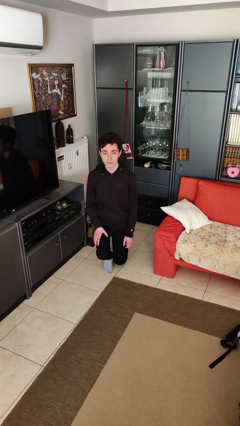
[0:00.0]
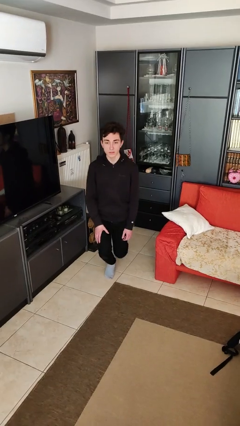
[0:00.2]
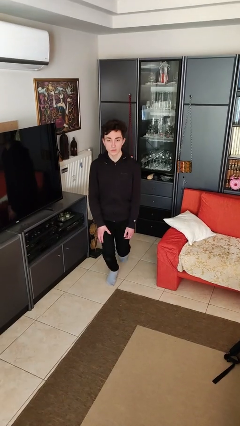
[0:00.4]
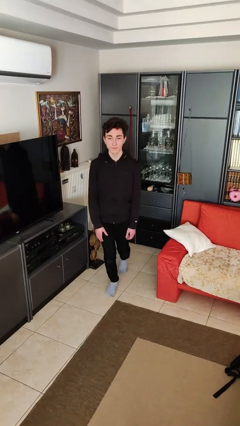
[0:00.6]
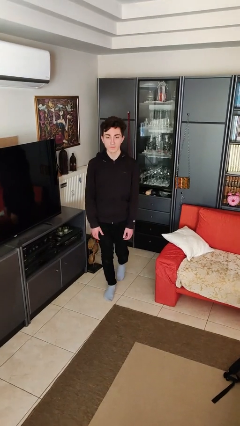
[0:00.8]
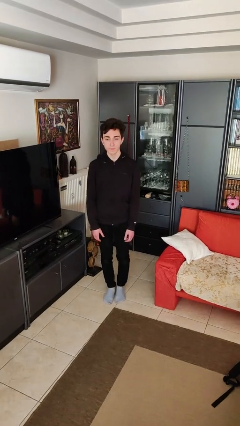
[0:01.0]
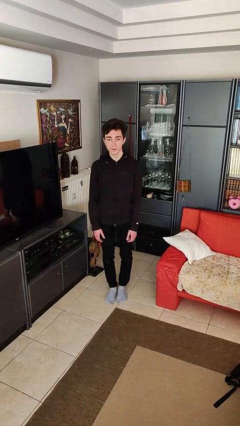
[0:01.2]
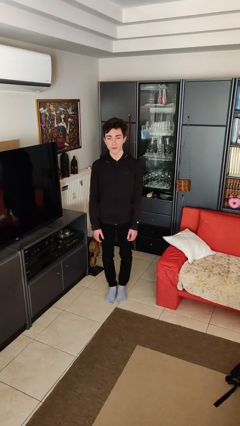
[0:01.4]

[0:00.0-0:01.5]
person stands up from floor

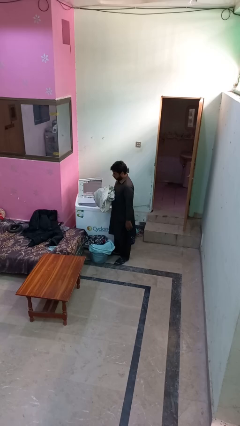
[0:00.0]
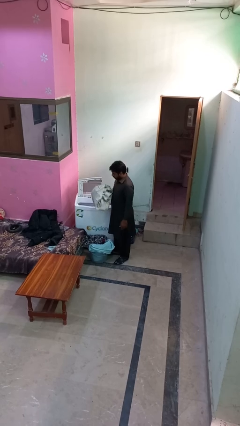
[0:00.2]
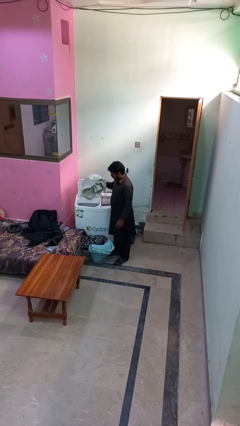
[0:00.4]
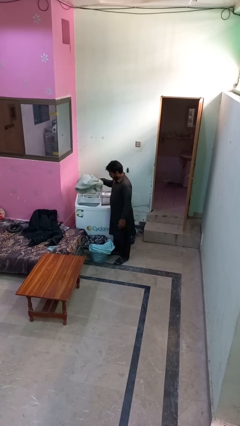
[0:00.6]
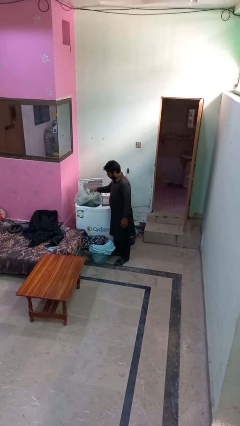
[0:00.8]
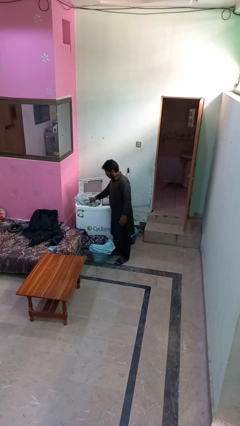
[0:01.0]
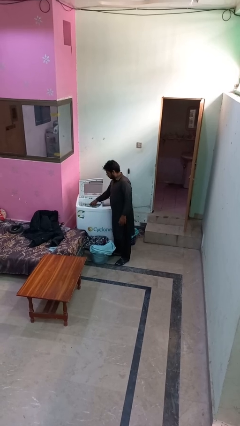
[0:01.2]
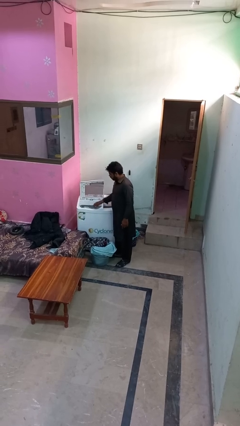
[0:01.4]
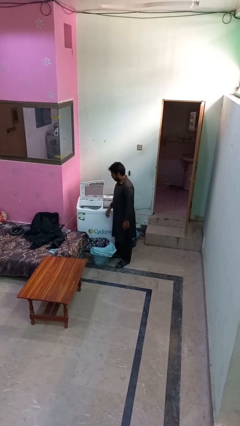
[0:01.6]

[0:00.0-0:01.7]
person loads clotheswasher

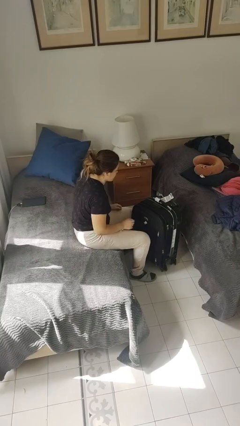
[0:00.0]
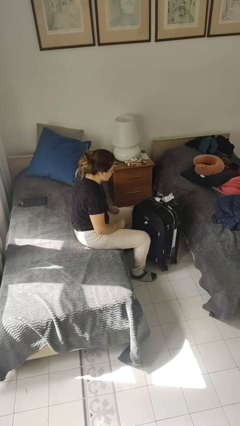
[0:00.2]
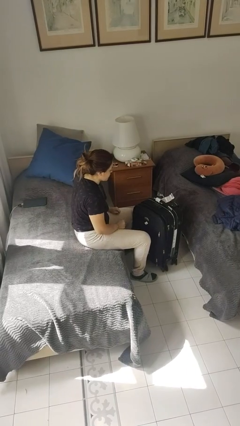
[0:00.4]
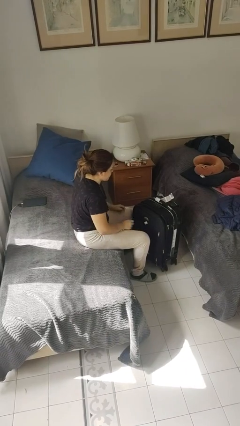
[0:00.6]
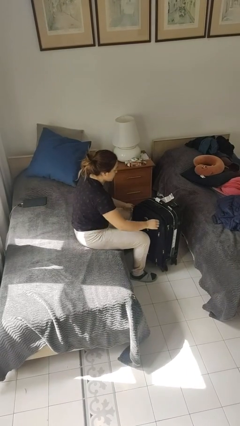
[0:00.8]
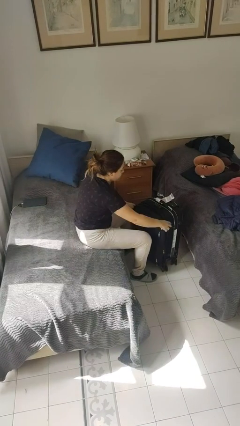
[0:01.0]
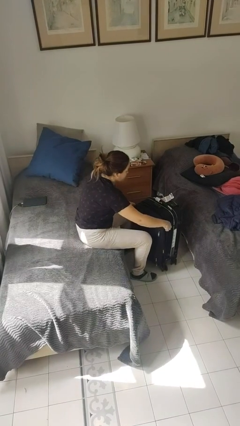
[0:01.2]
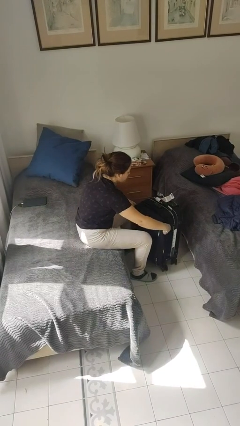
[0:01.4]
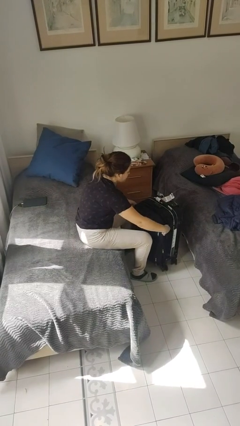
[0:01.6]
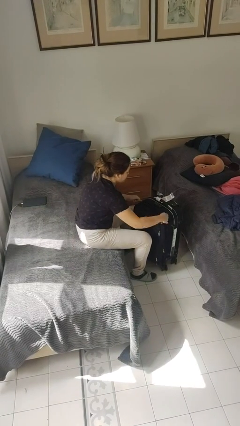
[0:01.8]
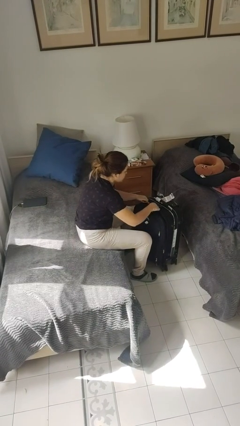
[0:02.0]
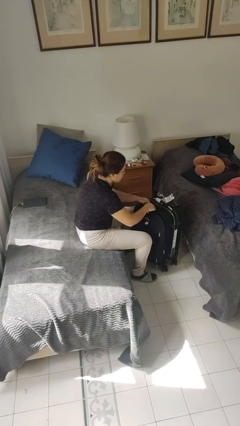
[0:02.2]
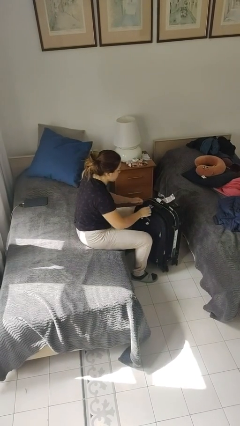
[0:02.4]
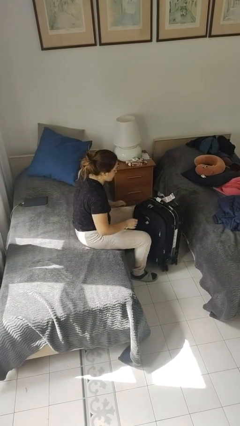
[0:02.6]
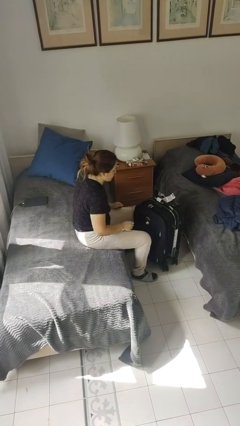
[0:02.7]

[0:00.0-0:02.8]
person closes suitcase

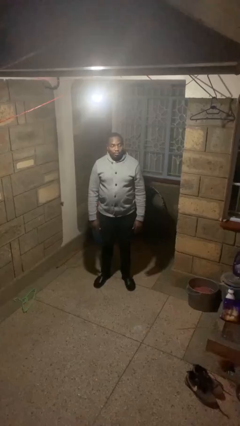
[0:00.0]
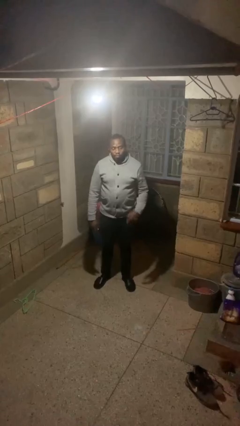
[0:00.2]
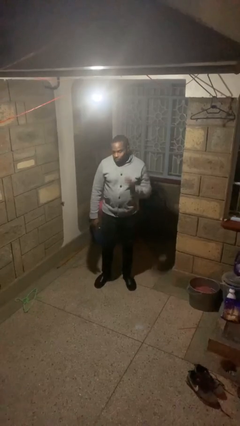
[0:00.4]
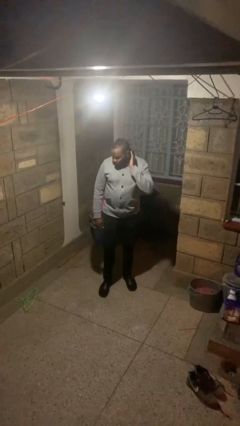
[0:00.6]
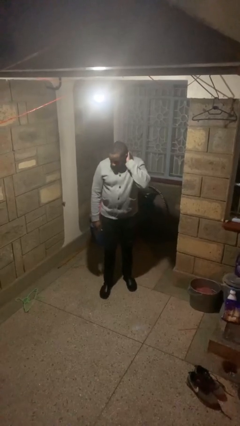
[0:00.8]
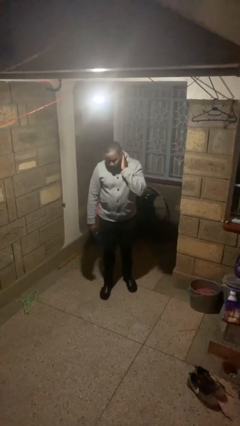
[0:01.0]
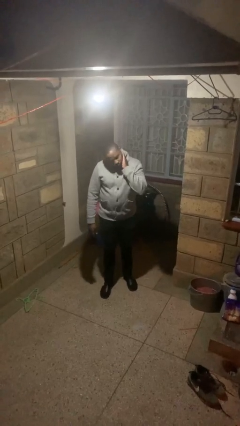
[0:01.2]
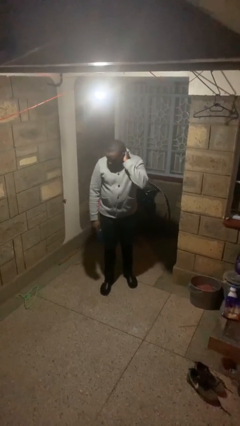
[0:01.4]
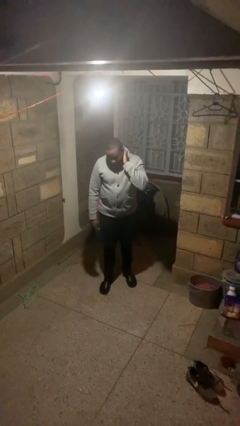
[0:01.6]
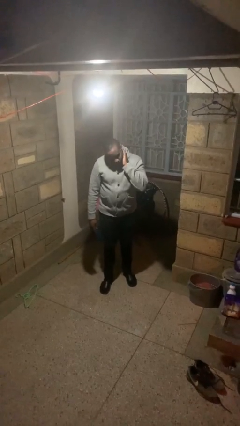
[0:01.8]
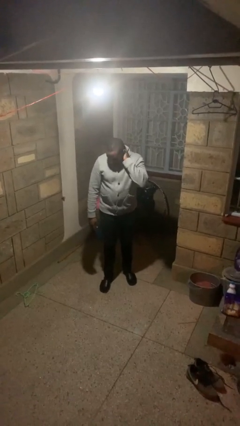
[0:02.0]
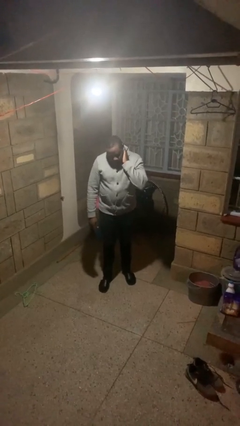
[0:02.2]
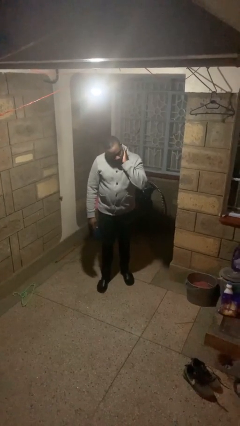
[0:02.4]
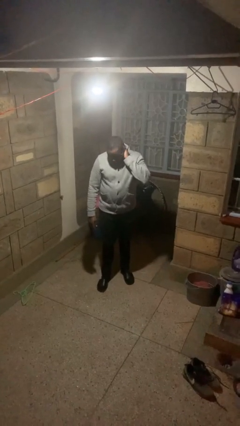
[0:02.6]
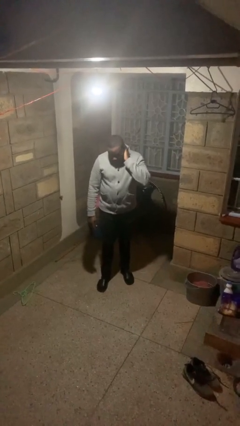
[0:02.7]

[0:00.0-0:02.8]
person rubs neck

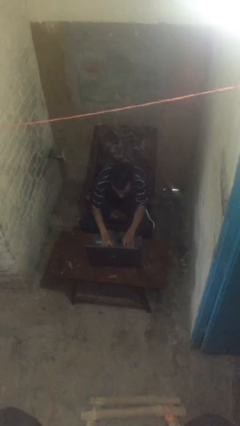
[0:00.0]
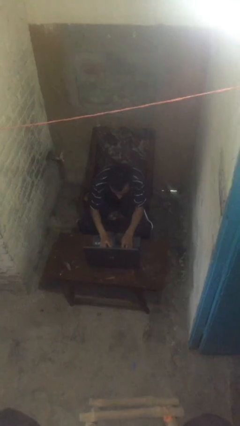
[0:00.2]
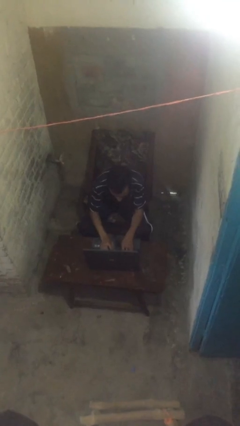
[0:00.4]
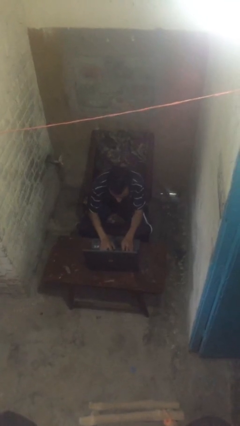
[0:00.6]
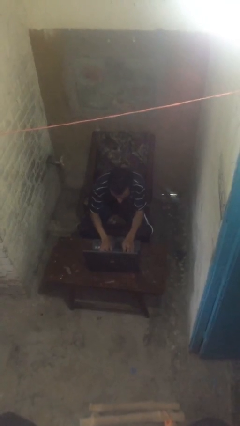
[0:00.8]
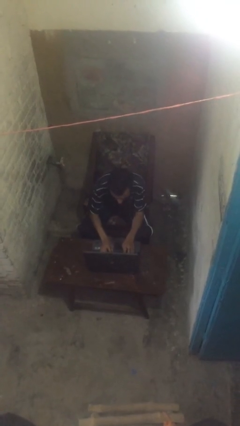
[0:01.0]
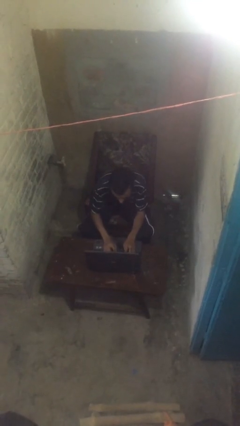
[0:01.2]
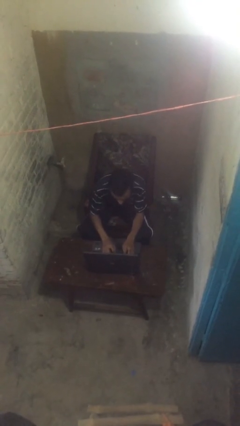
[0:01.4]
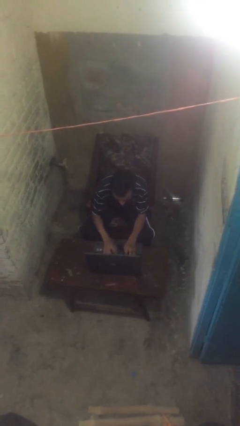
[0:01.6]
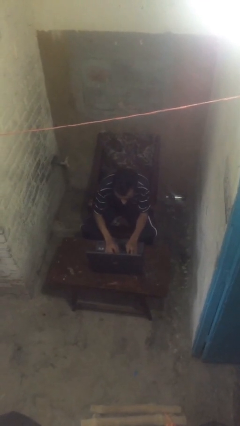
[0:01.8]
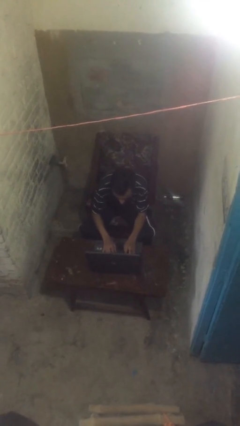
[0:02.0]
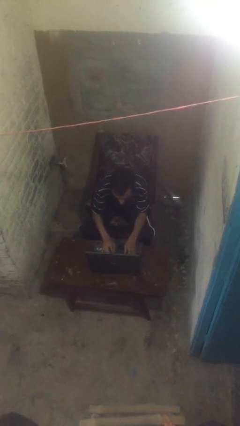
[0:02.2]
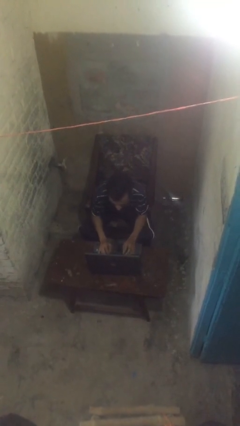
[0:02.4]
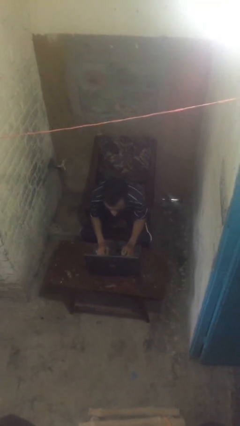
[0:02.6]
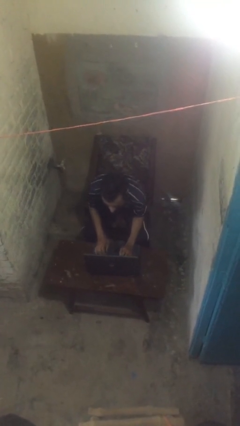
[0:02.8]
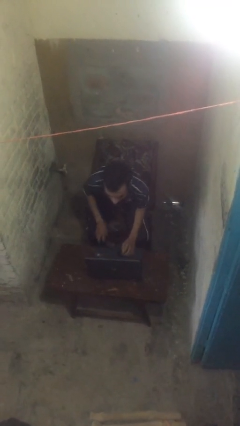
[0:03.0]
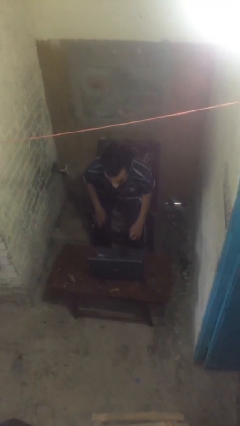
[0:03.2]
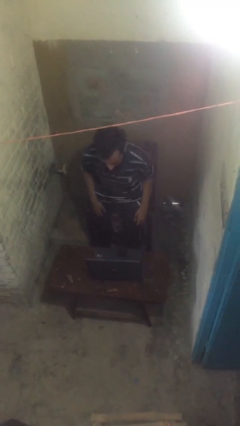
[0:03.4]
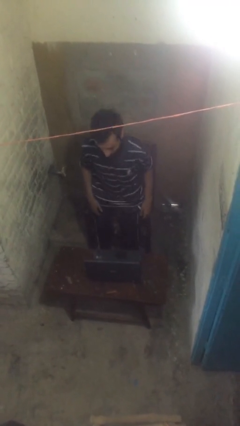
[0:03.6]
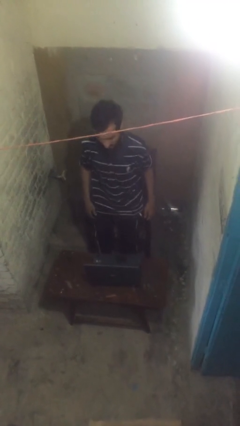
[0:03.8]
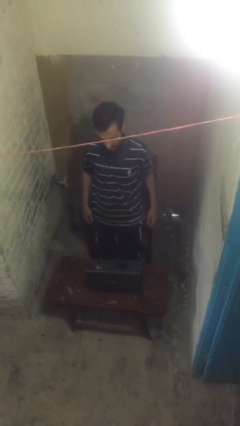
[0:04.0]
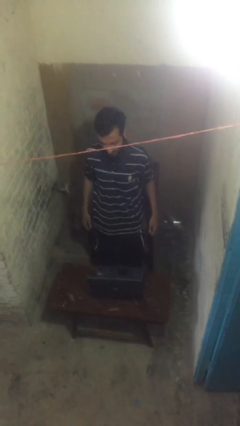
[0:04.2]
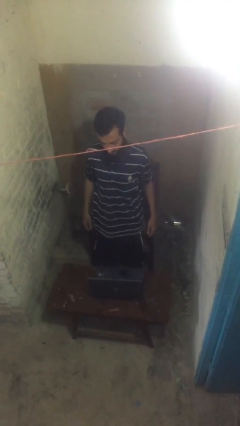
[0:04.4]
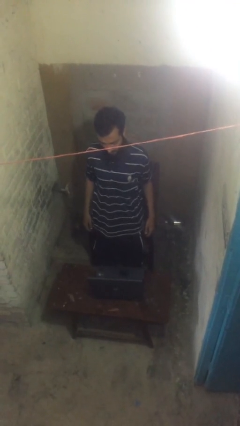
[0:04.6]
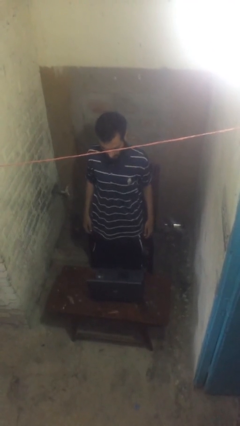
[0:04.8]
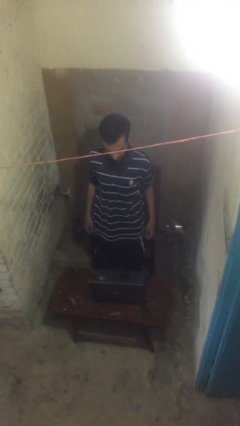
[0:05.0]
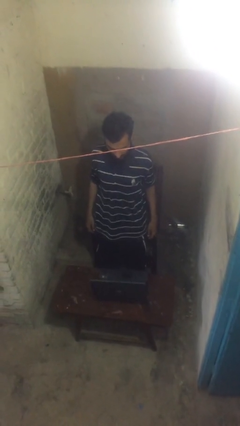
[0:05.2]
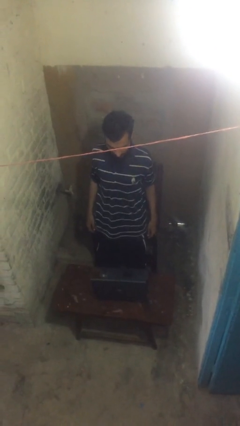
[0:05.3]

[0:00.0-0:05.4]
person stands up

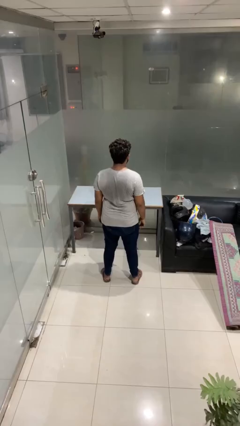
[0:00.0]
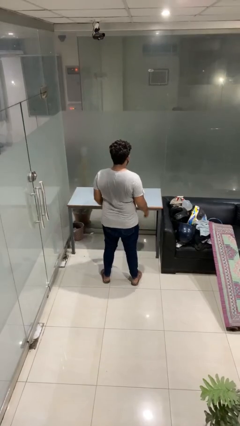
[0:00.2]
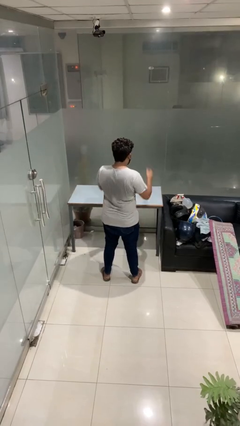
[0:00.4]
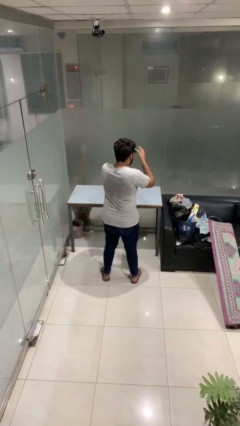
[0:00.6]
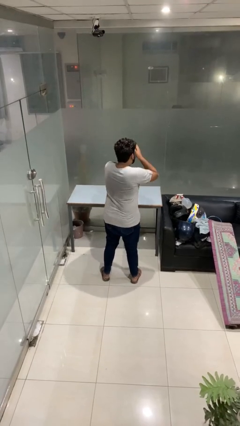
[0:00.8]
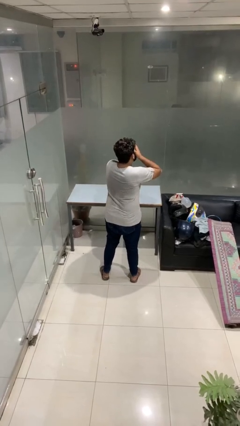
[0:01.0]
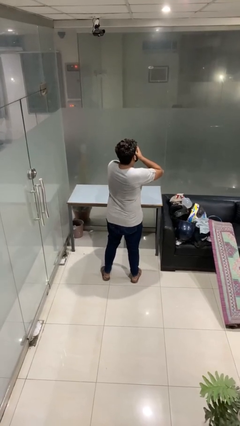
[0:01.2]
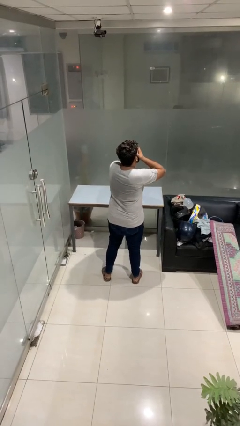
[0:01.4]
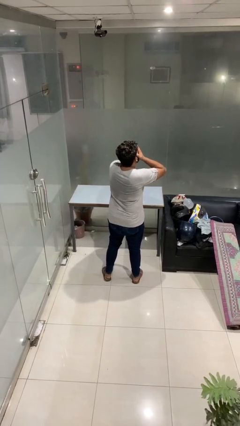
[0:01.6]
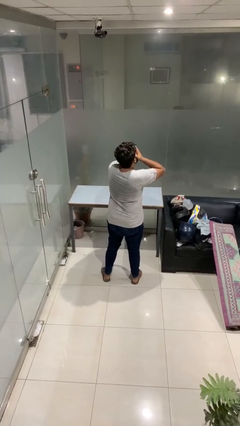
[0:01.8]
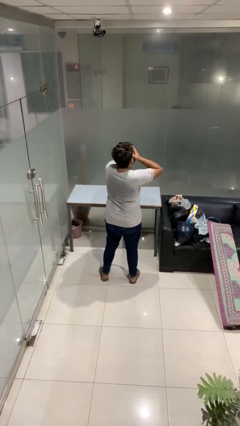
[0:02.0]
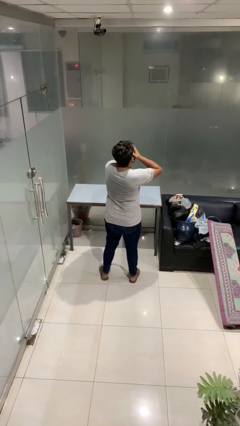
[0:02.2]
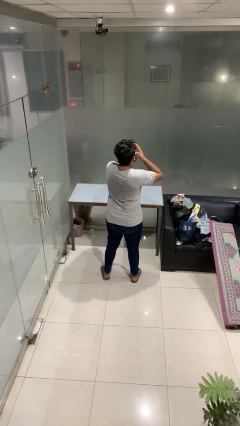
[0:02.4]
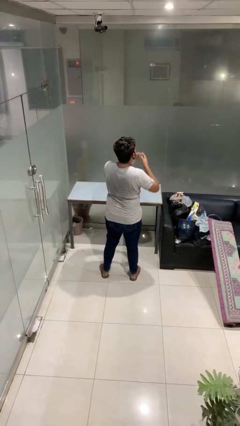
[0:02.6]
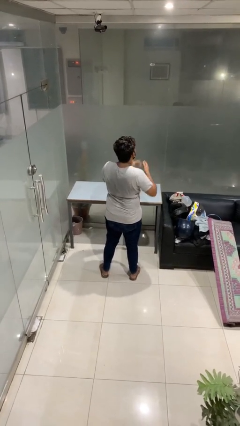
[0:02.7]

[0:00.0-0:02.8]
person covers face with hands

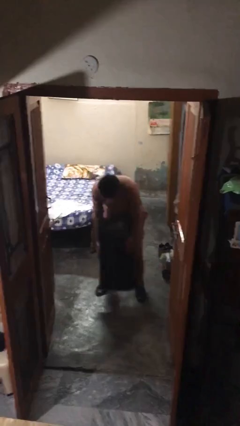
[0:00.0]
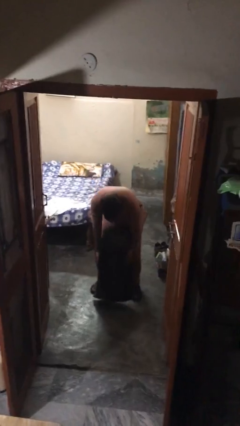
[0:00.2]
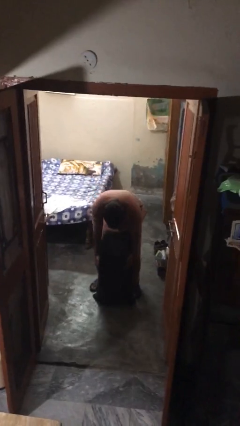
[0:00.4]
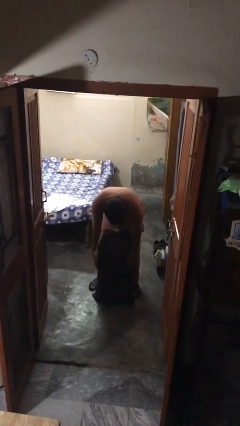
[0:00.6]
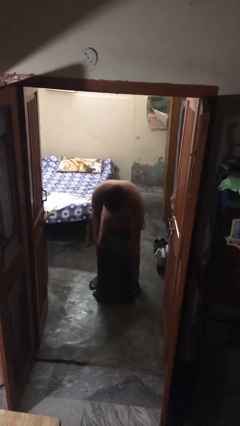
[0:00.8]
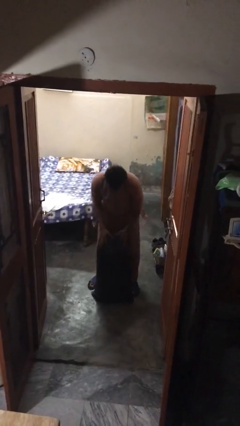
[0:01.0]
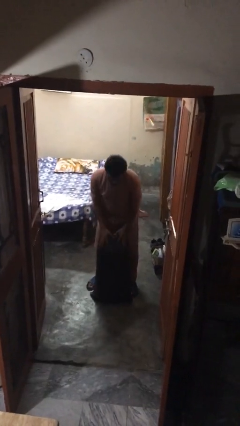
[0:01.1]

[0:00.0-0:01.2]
person puts down object on floor
